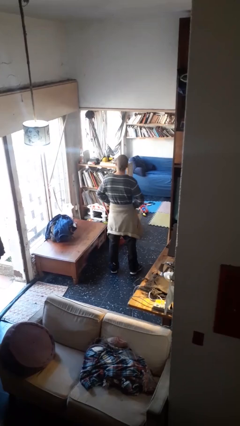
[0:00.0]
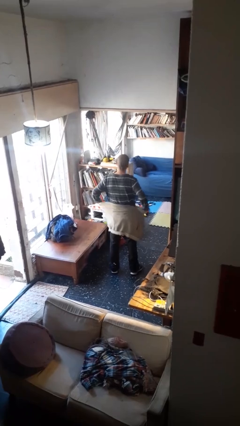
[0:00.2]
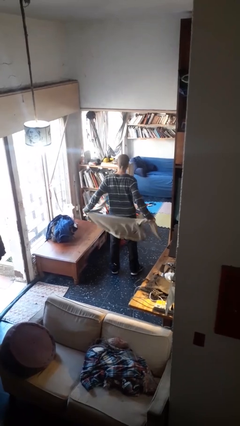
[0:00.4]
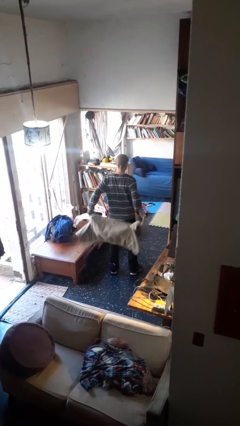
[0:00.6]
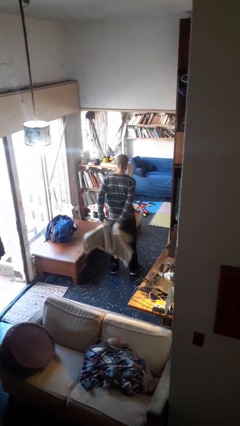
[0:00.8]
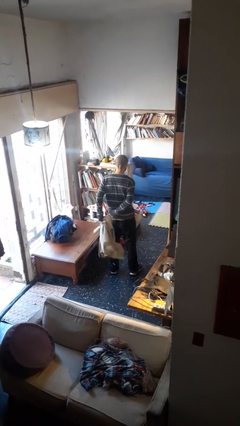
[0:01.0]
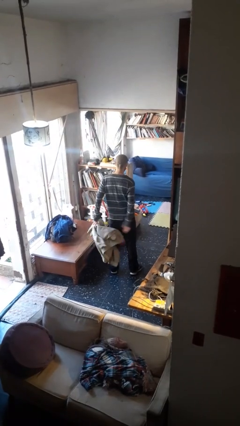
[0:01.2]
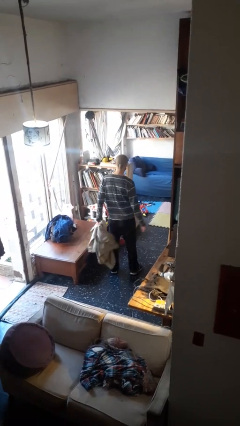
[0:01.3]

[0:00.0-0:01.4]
person unties jacket around waist

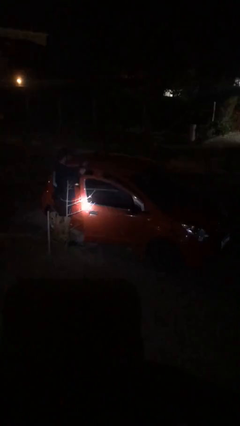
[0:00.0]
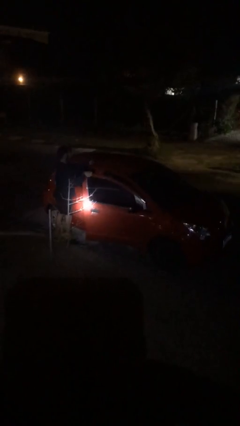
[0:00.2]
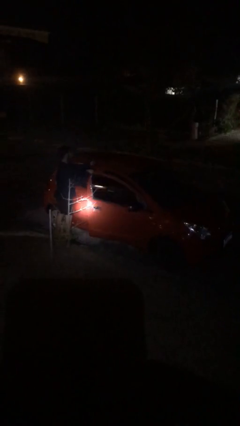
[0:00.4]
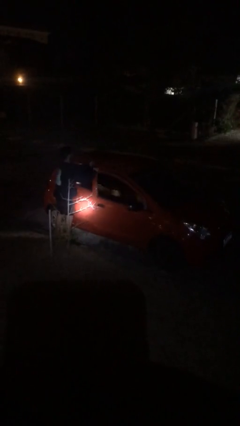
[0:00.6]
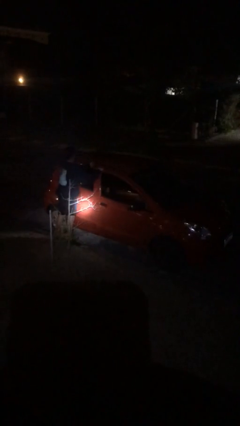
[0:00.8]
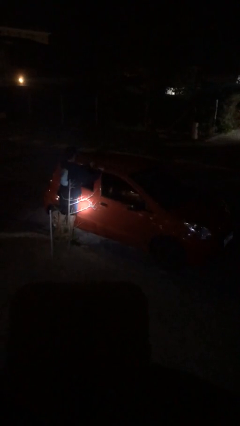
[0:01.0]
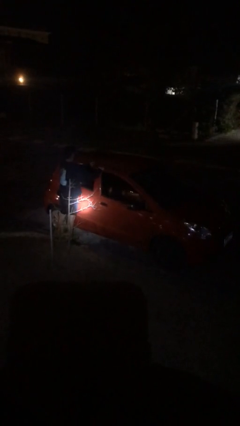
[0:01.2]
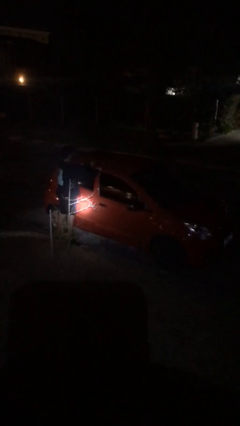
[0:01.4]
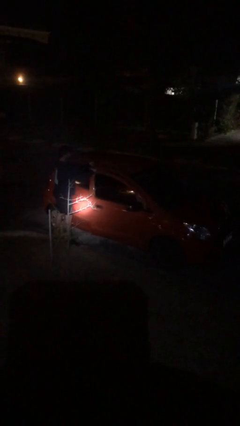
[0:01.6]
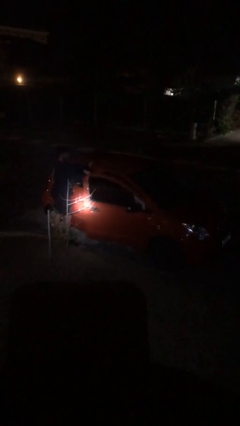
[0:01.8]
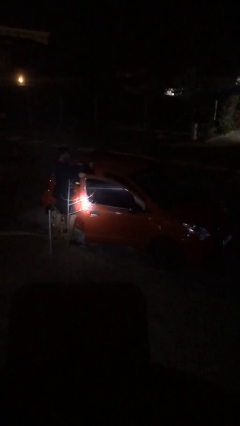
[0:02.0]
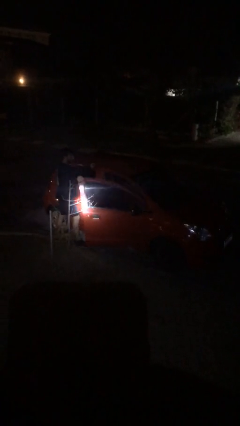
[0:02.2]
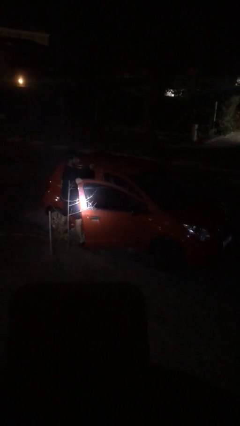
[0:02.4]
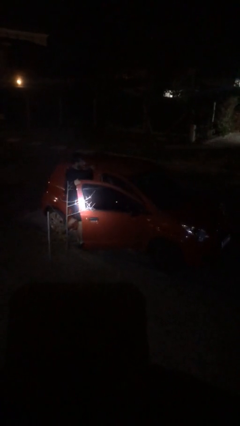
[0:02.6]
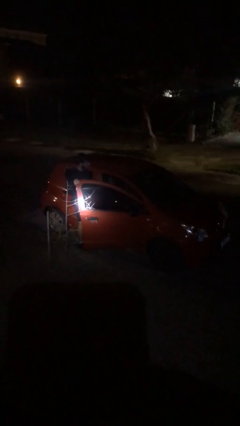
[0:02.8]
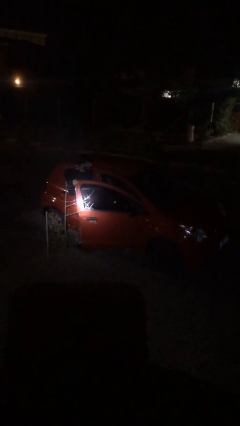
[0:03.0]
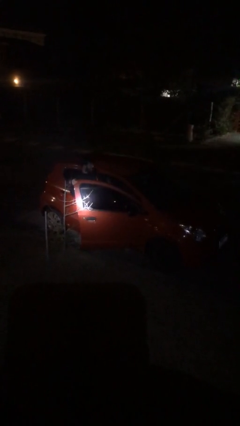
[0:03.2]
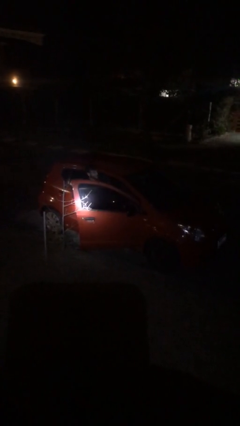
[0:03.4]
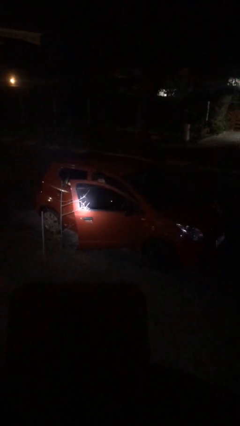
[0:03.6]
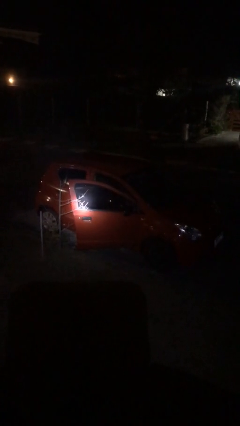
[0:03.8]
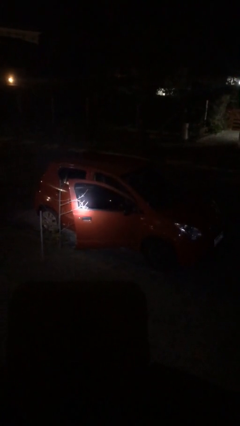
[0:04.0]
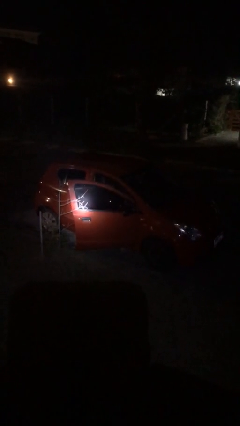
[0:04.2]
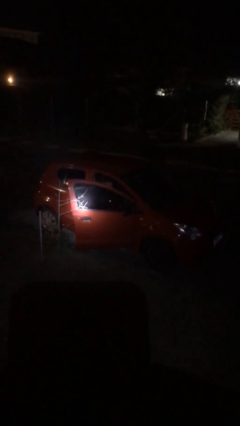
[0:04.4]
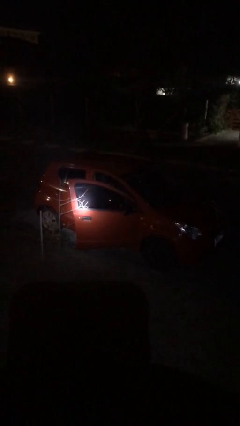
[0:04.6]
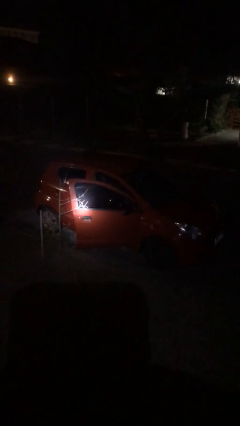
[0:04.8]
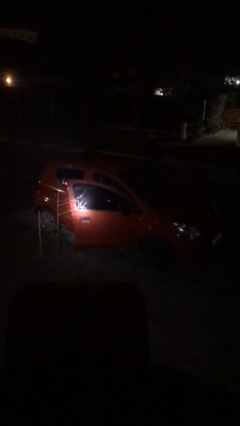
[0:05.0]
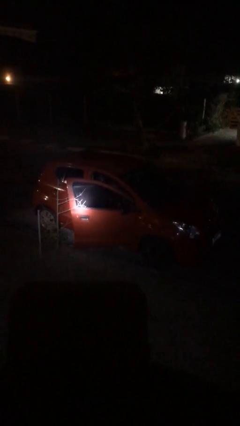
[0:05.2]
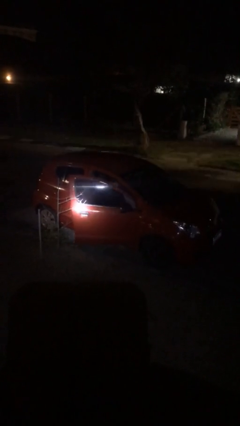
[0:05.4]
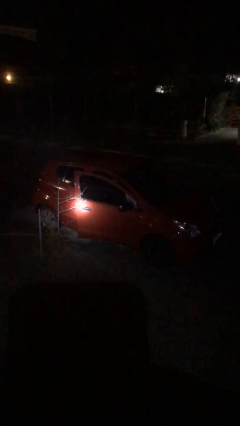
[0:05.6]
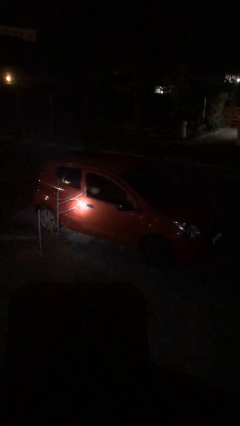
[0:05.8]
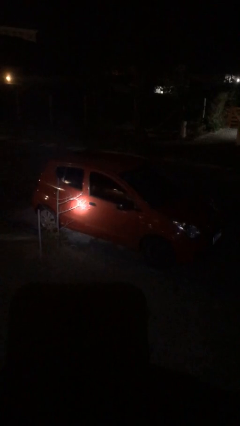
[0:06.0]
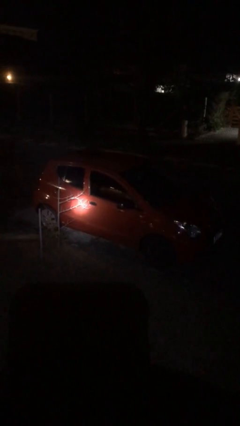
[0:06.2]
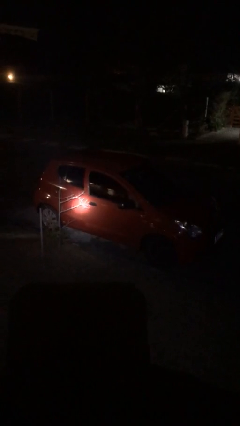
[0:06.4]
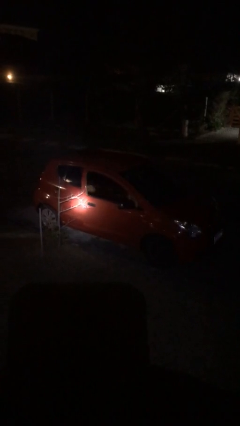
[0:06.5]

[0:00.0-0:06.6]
car picks up person

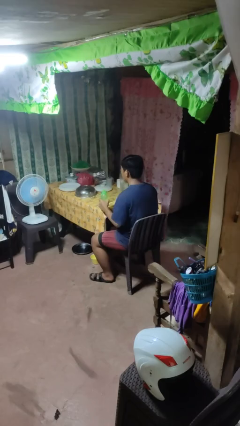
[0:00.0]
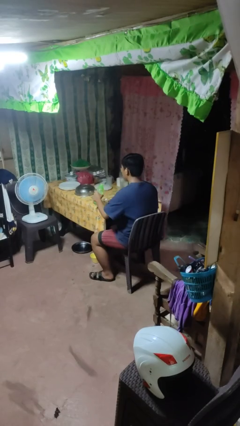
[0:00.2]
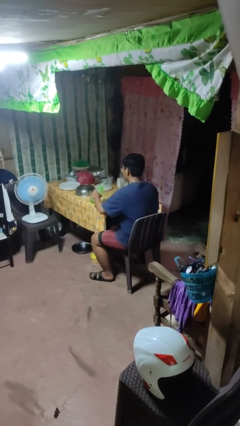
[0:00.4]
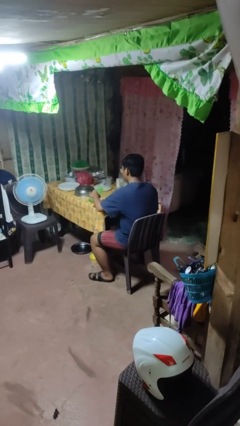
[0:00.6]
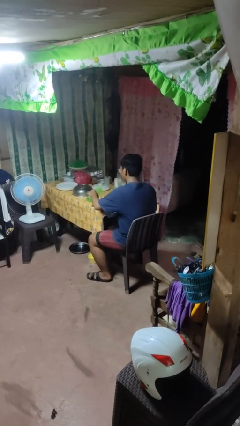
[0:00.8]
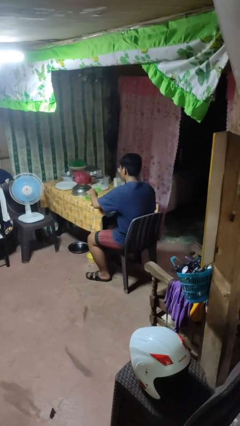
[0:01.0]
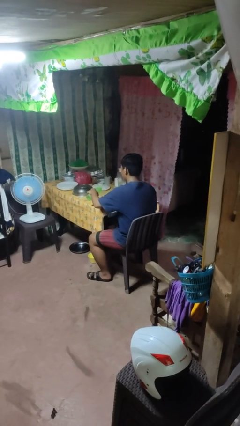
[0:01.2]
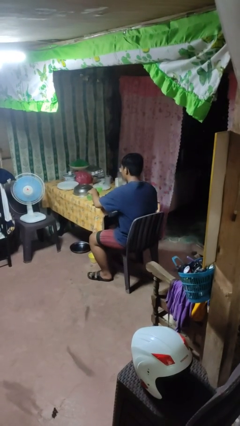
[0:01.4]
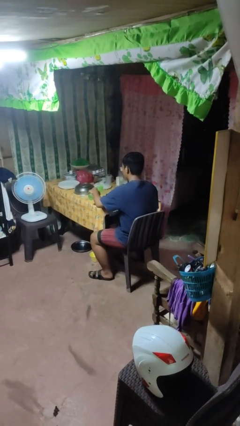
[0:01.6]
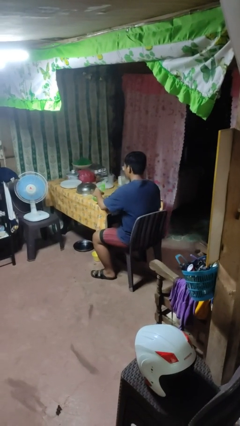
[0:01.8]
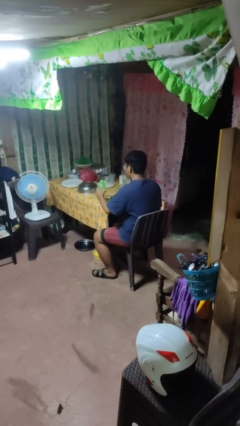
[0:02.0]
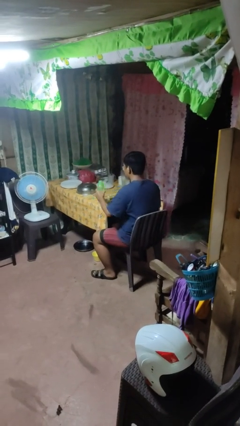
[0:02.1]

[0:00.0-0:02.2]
person pours liquid into cup

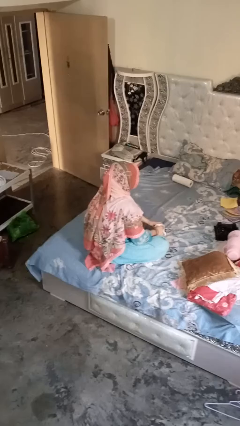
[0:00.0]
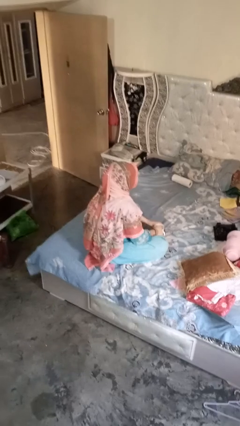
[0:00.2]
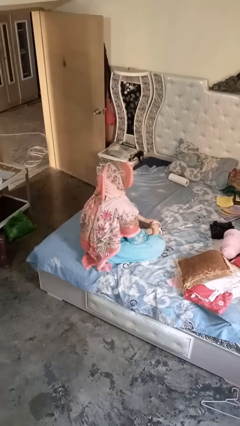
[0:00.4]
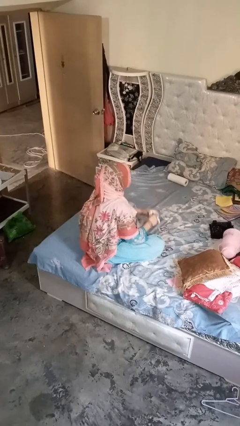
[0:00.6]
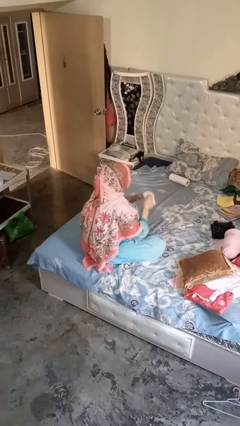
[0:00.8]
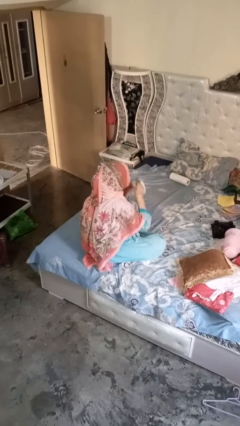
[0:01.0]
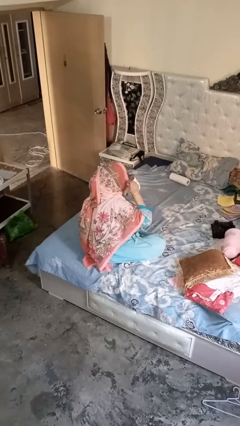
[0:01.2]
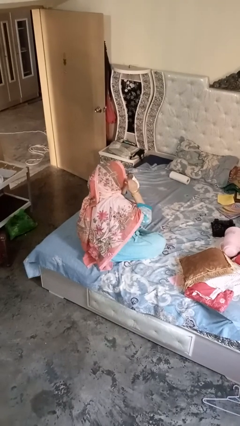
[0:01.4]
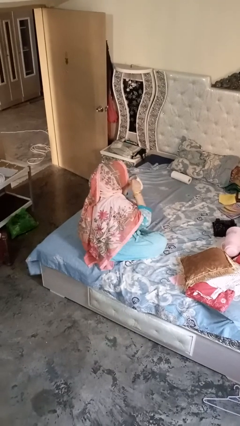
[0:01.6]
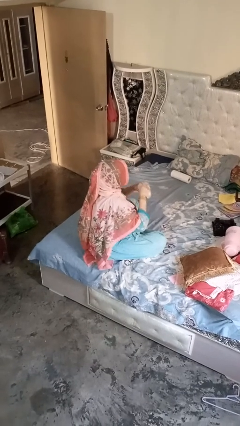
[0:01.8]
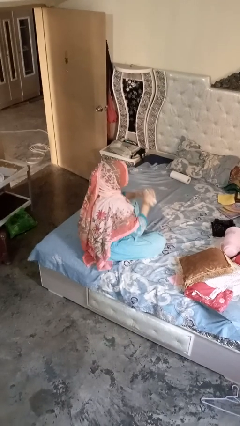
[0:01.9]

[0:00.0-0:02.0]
person drinks from mug

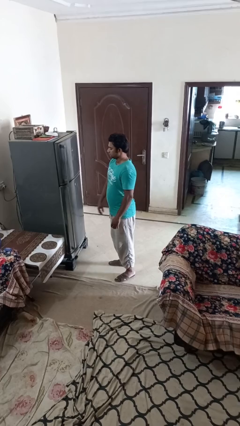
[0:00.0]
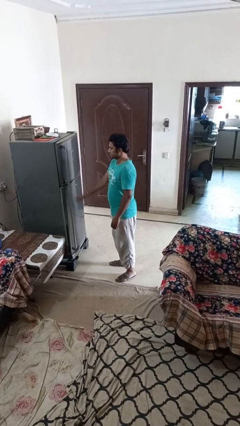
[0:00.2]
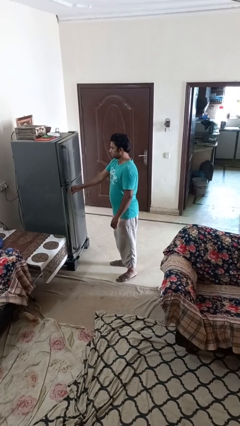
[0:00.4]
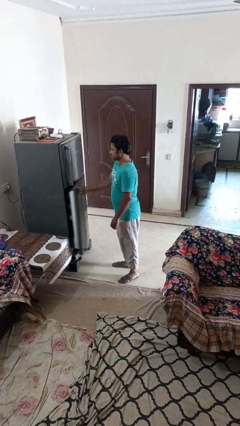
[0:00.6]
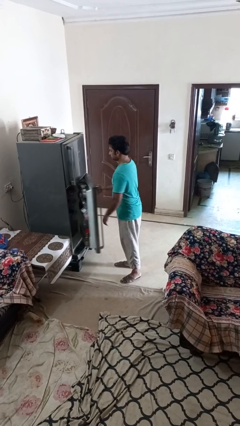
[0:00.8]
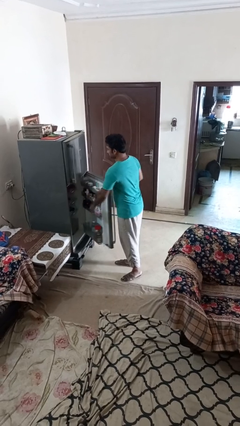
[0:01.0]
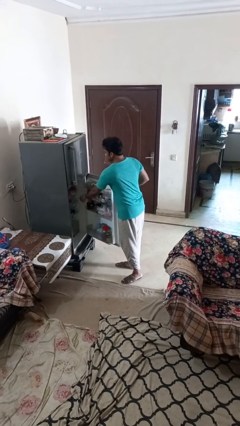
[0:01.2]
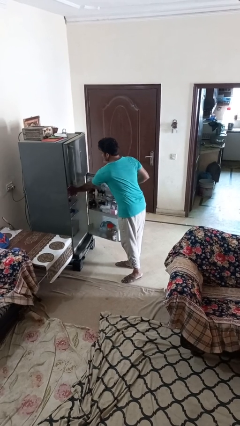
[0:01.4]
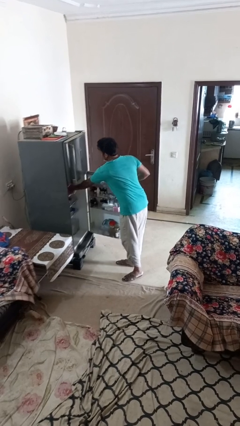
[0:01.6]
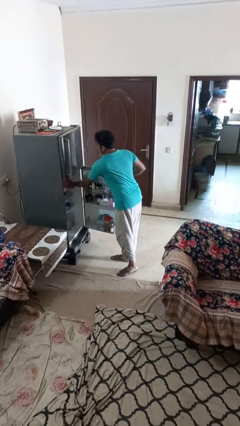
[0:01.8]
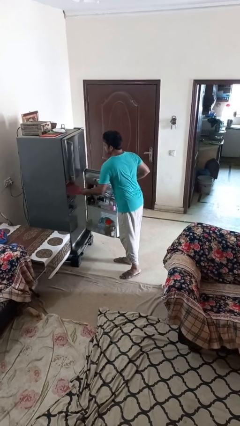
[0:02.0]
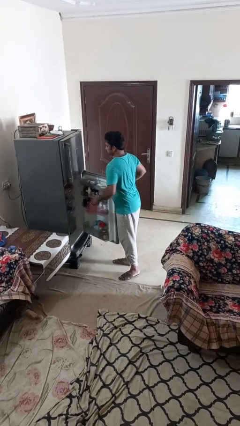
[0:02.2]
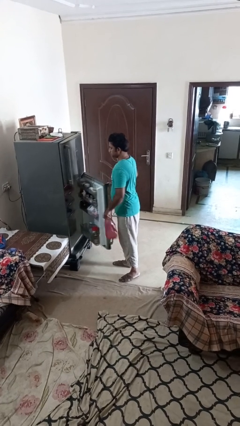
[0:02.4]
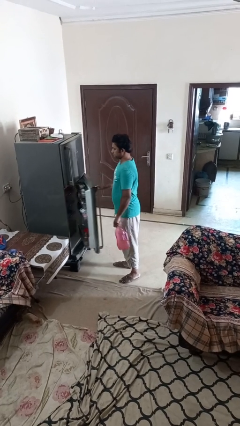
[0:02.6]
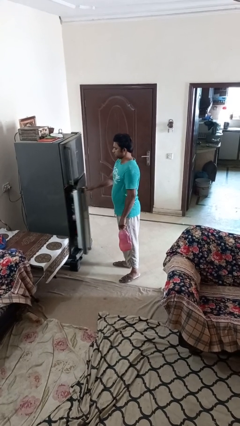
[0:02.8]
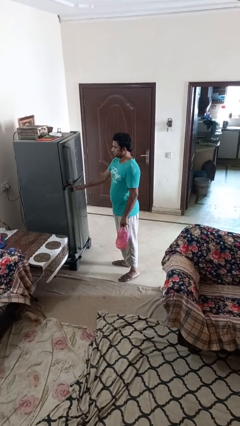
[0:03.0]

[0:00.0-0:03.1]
person takes object from refrigerator

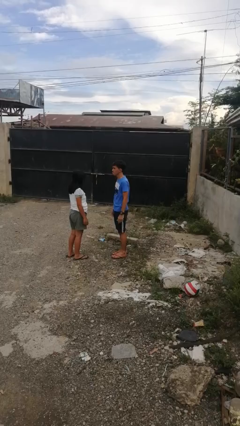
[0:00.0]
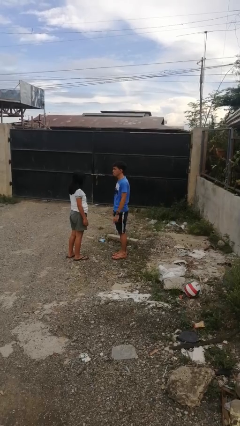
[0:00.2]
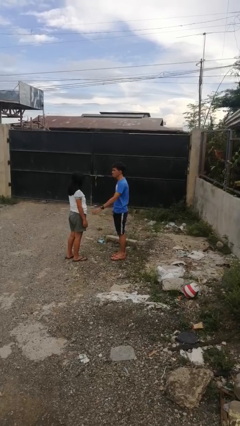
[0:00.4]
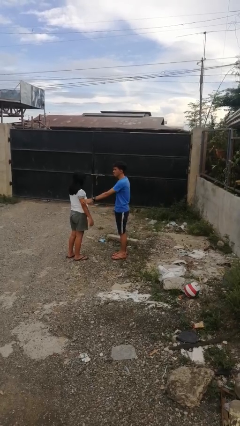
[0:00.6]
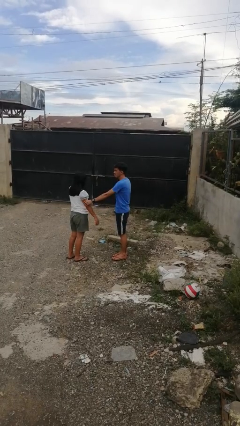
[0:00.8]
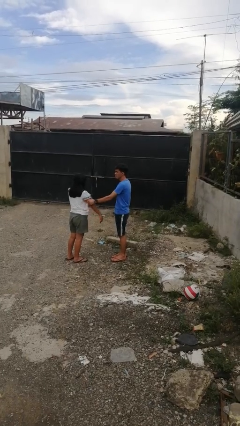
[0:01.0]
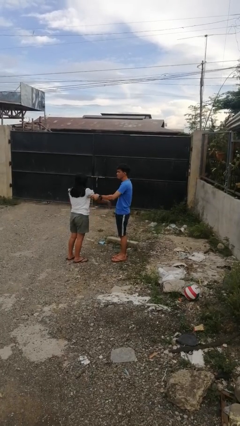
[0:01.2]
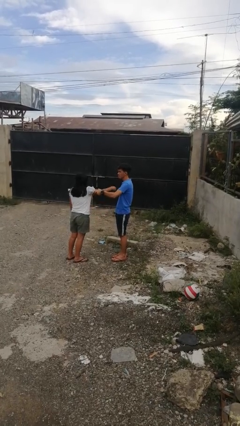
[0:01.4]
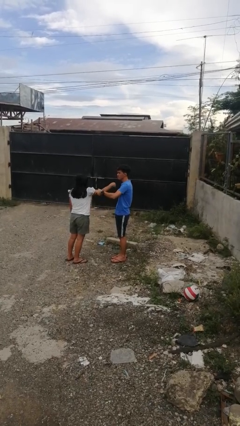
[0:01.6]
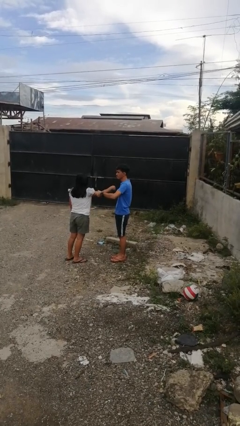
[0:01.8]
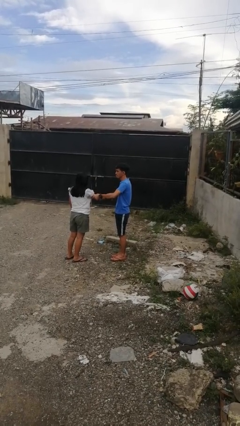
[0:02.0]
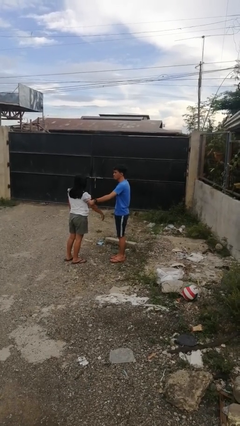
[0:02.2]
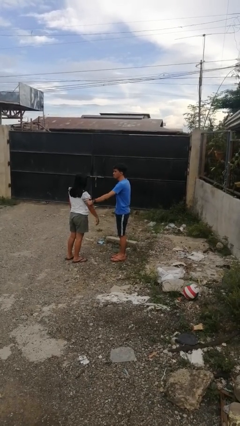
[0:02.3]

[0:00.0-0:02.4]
person grabs person by bicep

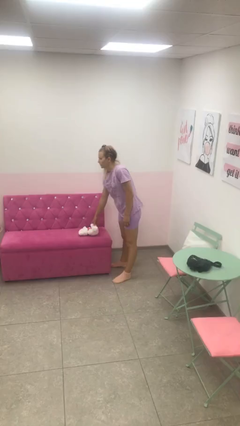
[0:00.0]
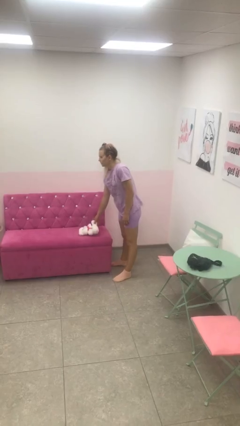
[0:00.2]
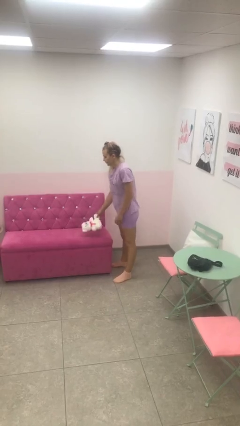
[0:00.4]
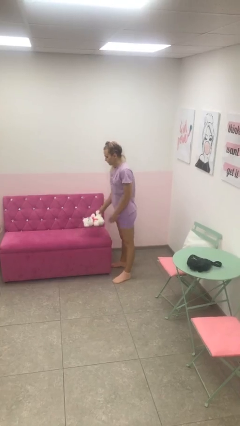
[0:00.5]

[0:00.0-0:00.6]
person picks up object from couch
